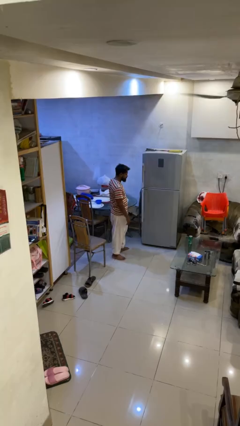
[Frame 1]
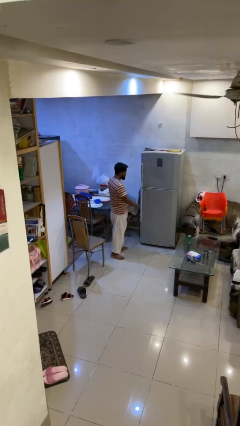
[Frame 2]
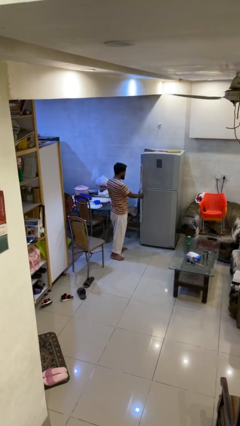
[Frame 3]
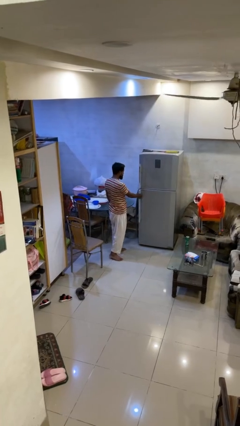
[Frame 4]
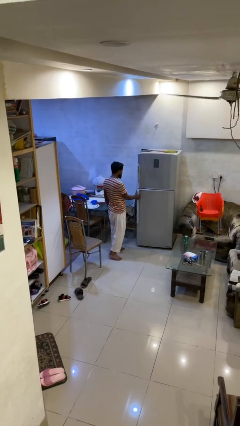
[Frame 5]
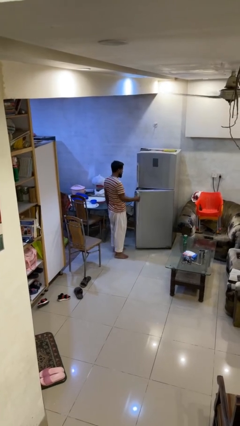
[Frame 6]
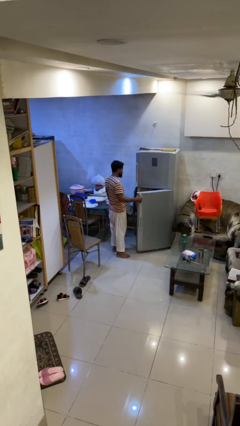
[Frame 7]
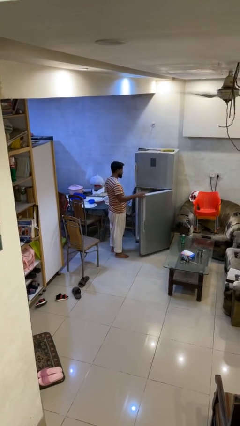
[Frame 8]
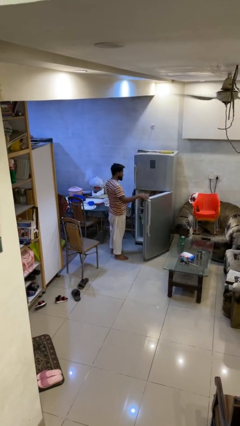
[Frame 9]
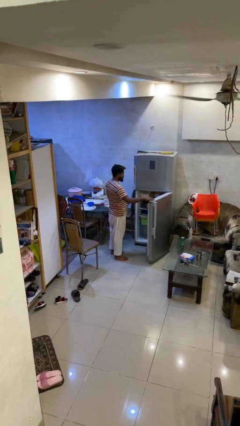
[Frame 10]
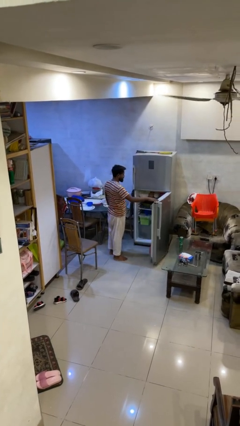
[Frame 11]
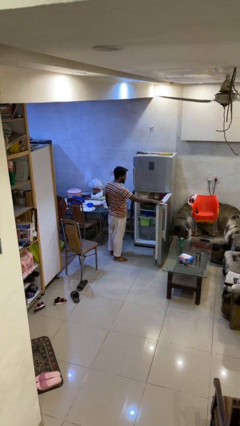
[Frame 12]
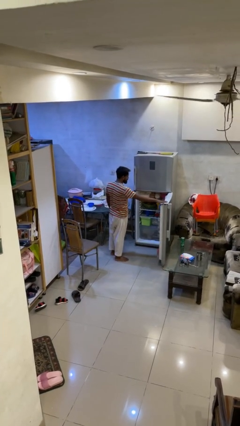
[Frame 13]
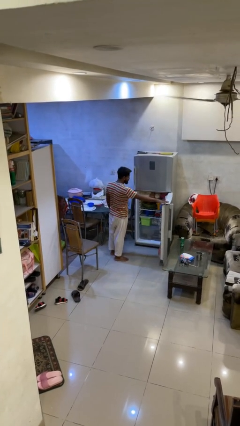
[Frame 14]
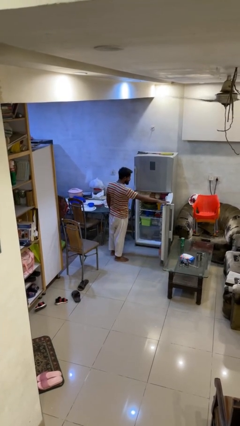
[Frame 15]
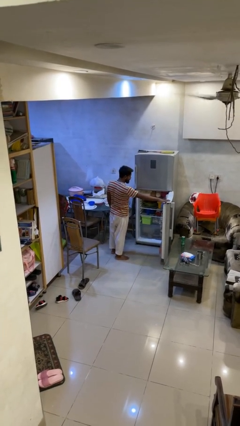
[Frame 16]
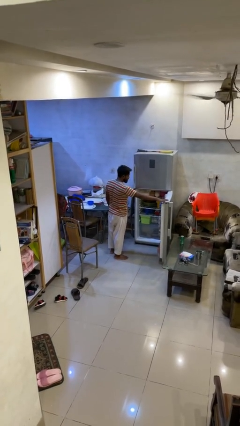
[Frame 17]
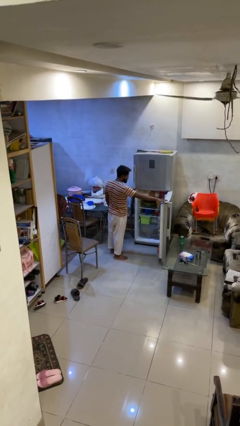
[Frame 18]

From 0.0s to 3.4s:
person opens refrigerator

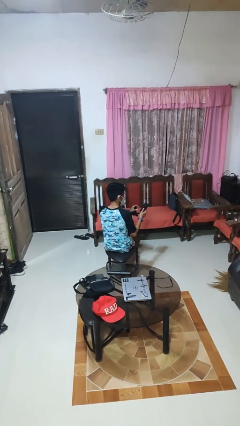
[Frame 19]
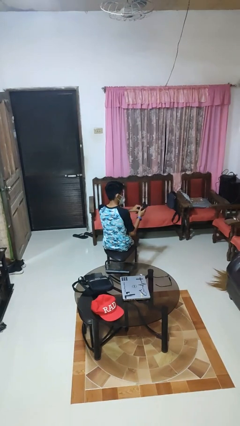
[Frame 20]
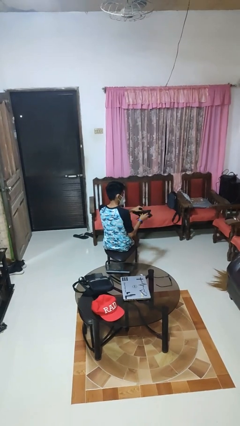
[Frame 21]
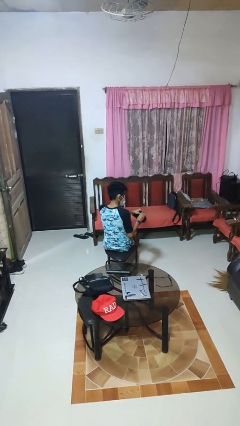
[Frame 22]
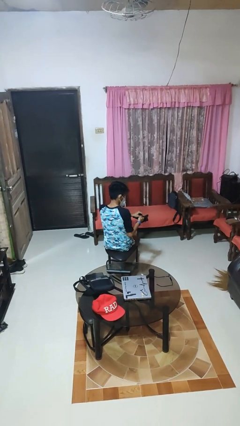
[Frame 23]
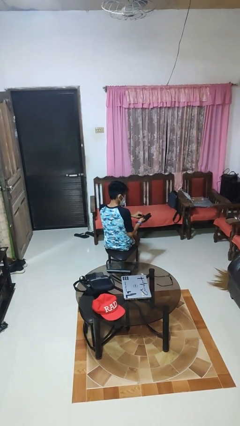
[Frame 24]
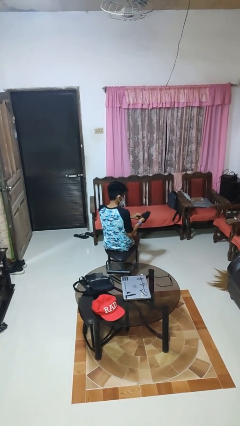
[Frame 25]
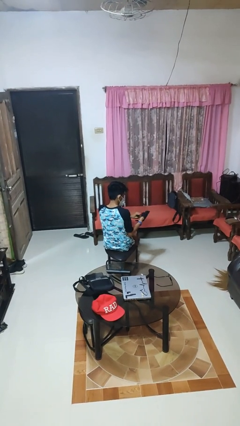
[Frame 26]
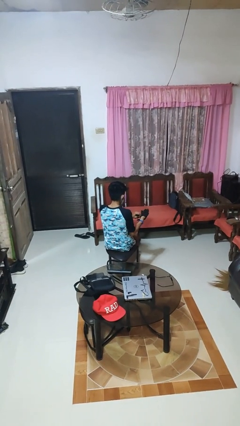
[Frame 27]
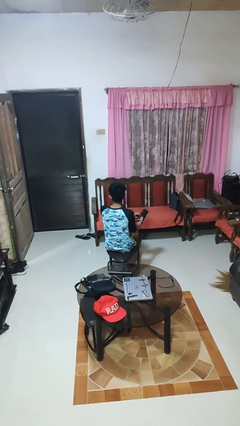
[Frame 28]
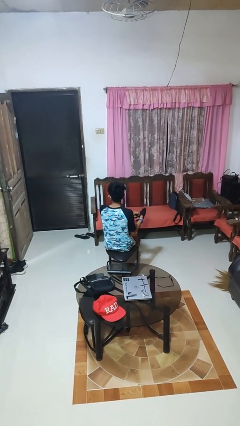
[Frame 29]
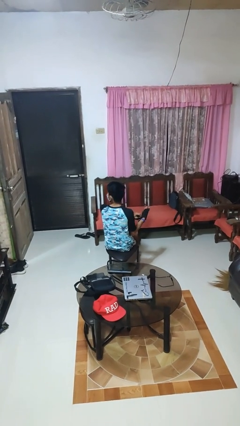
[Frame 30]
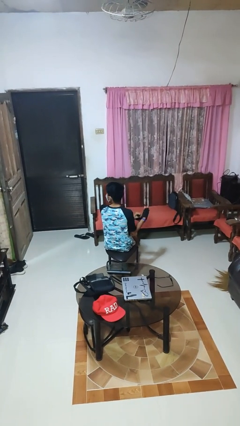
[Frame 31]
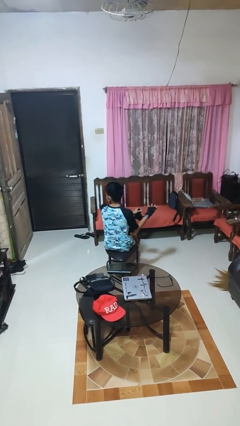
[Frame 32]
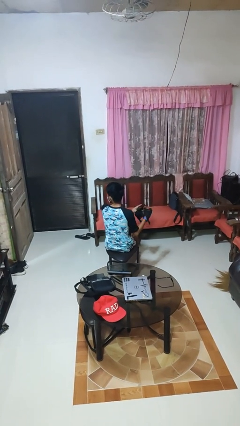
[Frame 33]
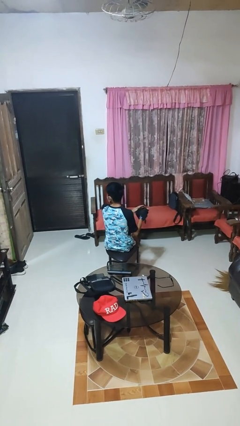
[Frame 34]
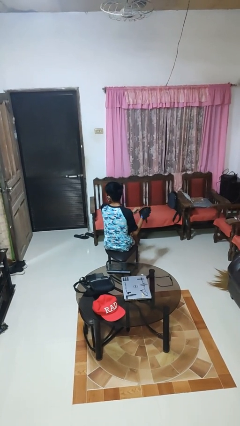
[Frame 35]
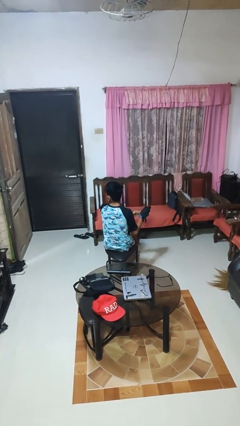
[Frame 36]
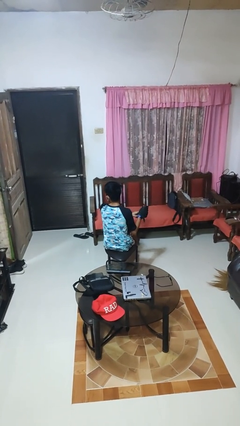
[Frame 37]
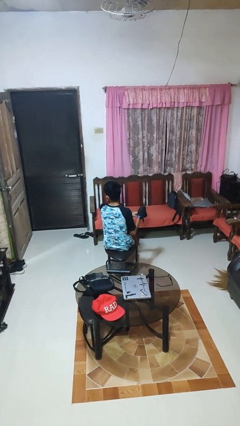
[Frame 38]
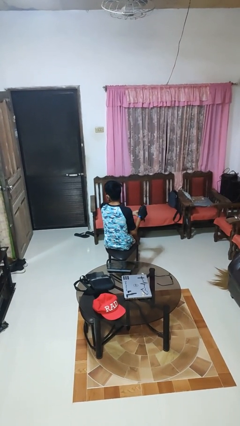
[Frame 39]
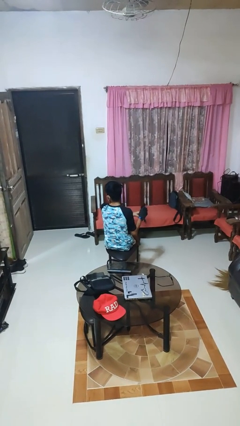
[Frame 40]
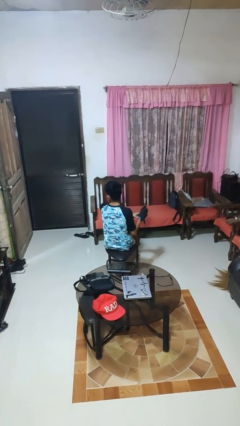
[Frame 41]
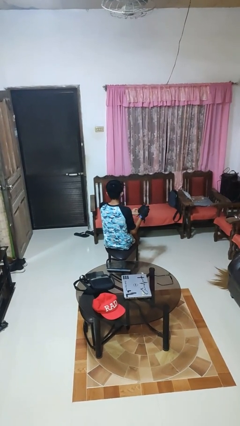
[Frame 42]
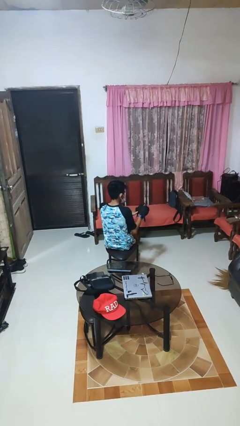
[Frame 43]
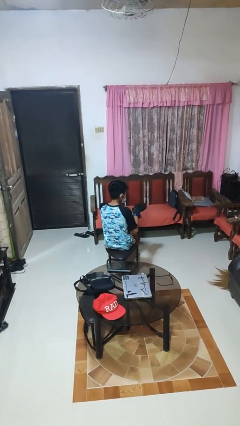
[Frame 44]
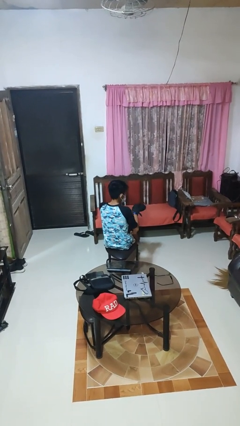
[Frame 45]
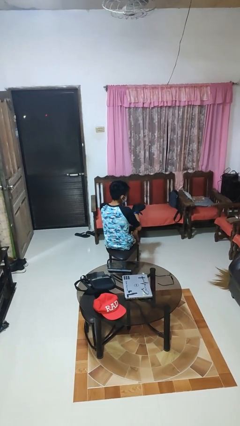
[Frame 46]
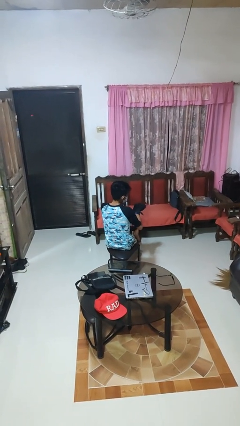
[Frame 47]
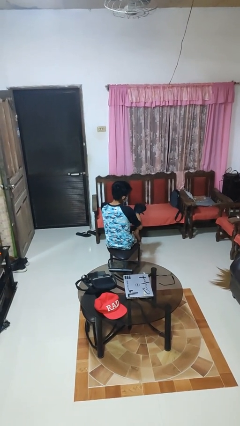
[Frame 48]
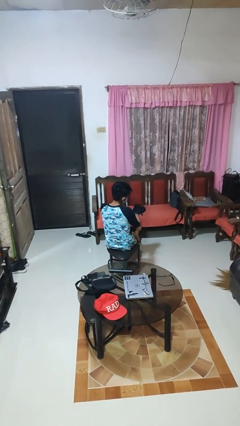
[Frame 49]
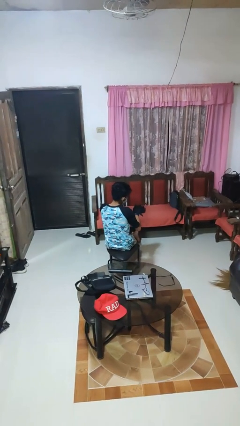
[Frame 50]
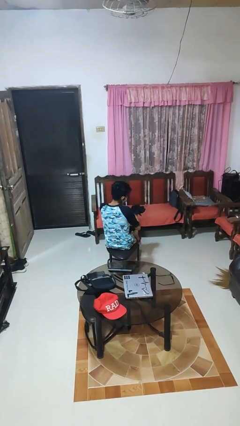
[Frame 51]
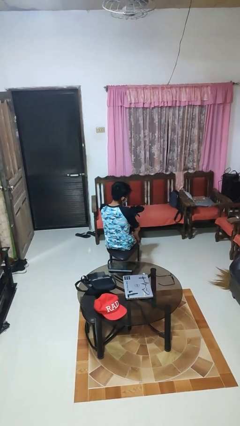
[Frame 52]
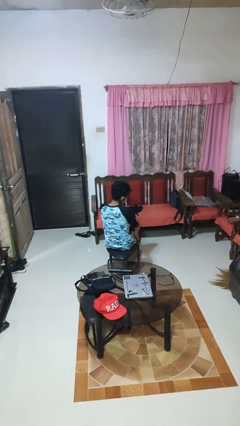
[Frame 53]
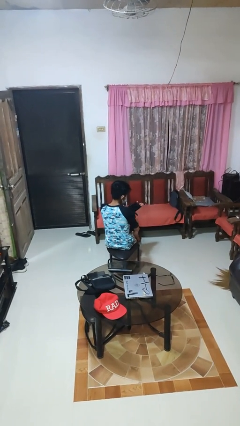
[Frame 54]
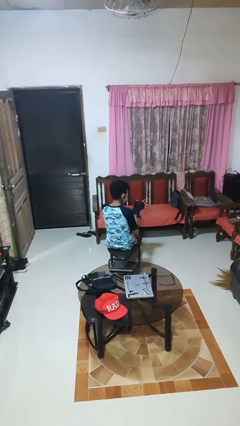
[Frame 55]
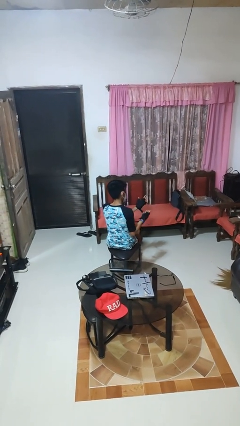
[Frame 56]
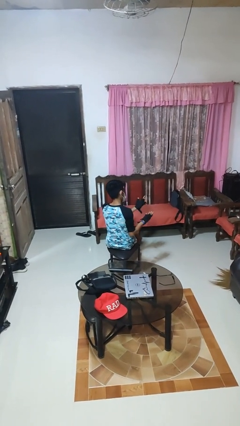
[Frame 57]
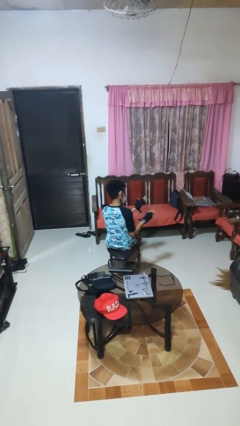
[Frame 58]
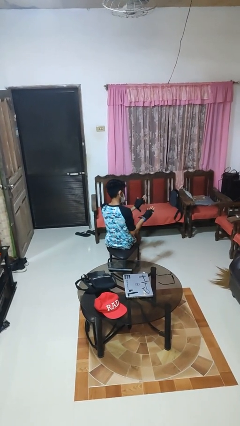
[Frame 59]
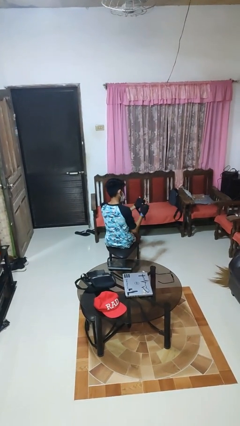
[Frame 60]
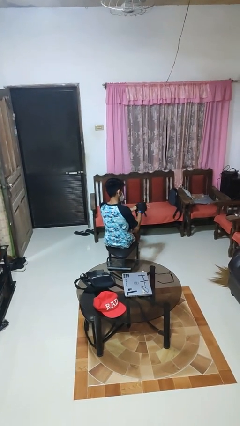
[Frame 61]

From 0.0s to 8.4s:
person puts on gloves

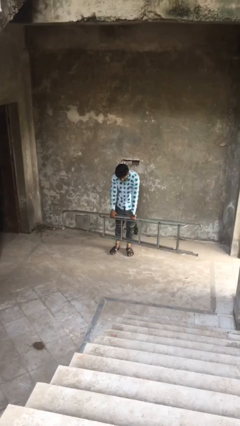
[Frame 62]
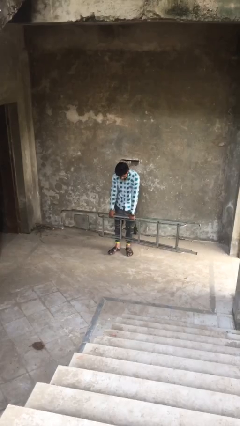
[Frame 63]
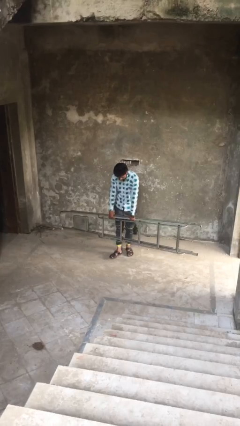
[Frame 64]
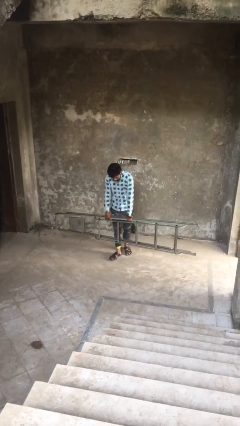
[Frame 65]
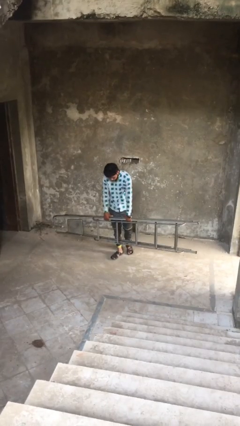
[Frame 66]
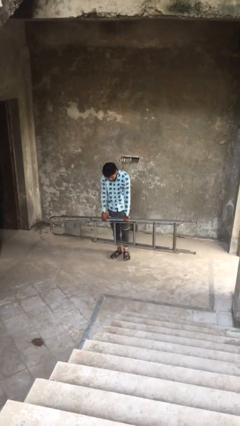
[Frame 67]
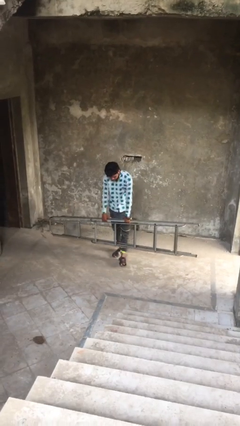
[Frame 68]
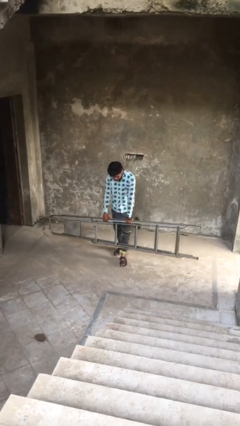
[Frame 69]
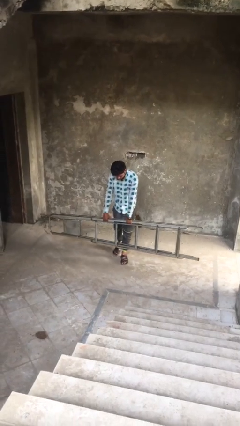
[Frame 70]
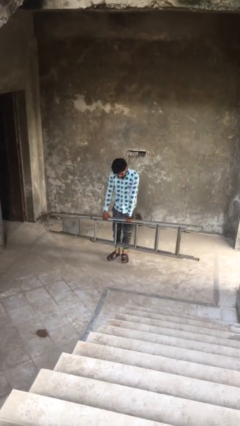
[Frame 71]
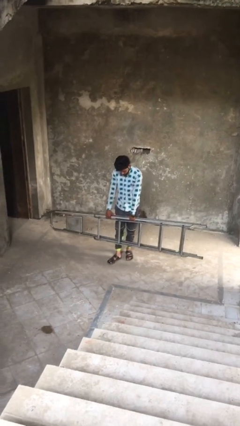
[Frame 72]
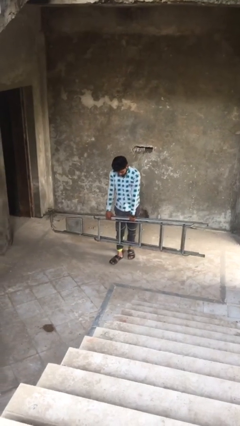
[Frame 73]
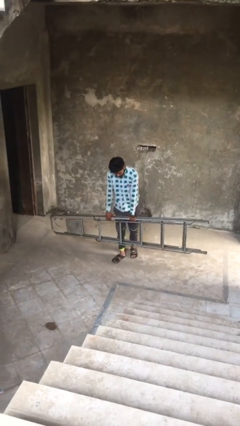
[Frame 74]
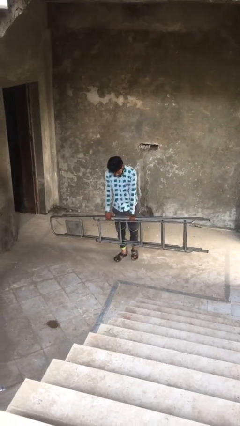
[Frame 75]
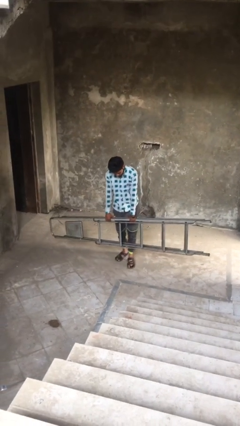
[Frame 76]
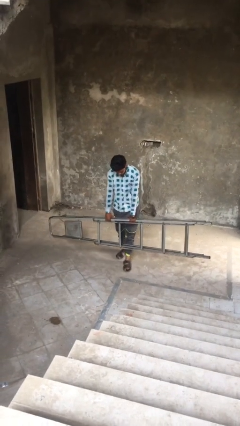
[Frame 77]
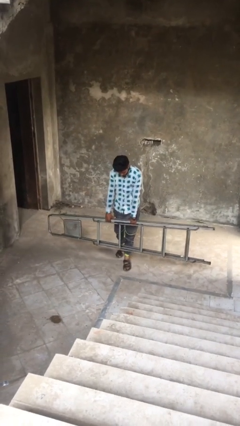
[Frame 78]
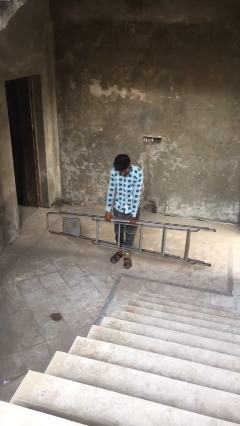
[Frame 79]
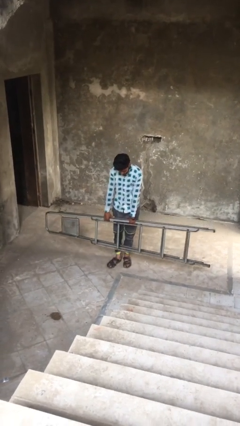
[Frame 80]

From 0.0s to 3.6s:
person carries heavy object

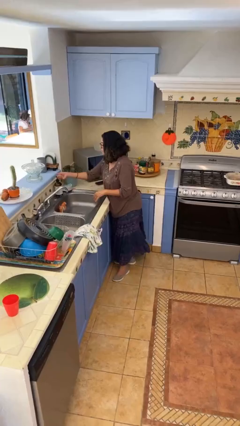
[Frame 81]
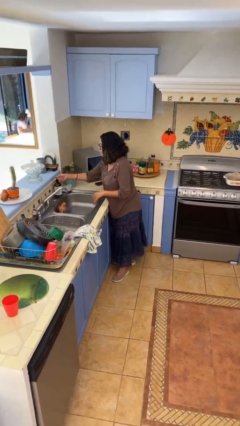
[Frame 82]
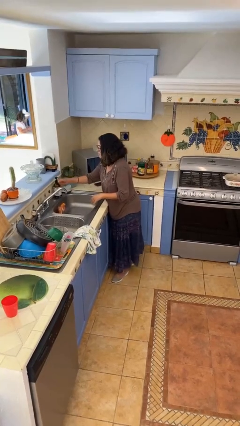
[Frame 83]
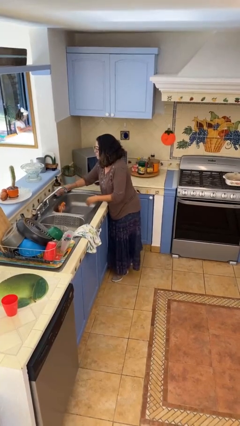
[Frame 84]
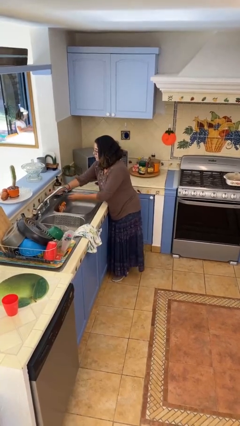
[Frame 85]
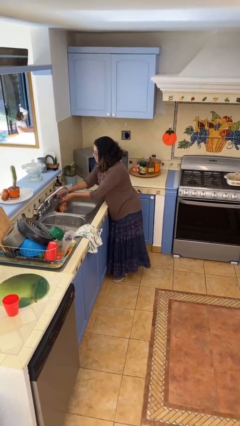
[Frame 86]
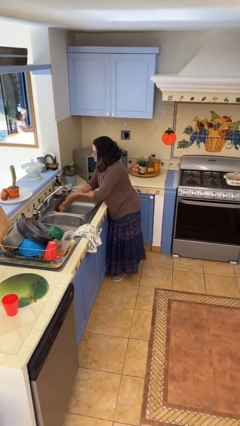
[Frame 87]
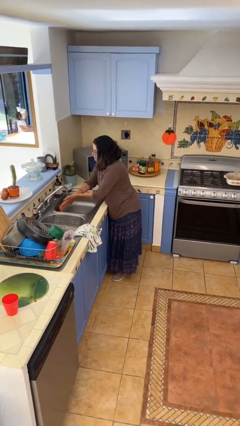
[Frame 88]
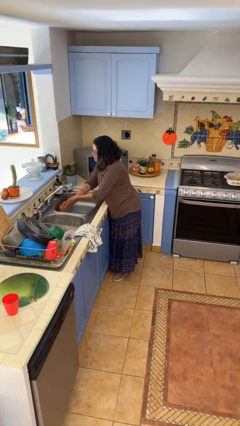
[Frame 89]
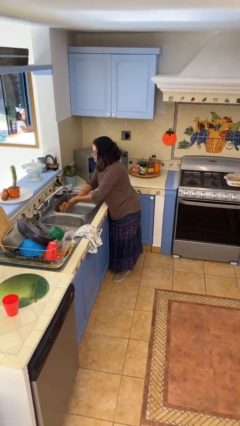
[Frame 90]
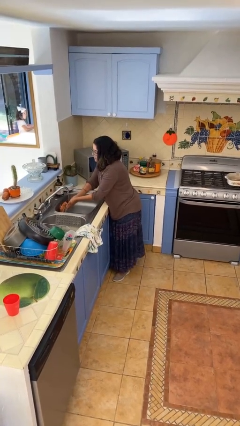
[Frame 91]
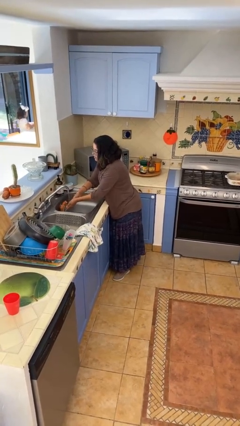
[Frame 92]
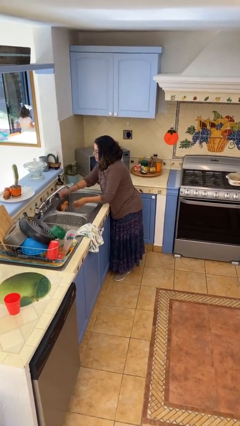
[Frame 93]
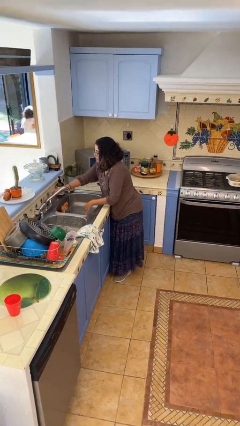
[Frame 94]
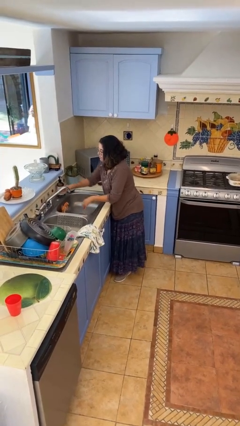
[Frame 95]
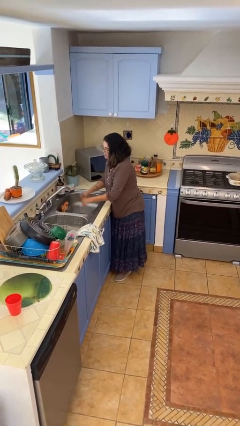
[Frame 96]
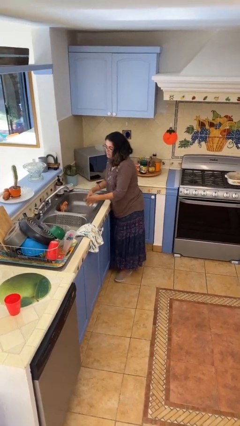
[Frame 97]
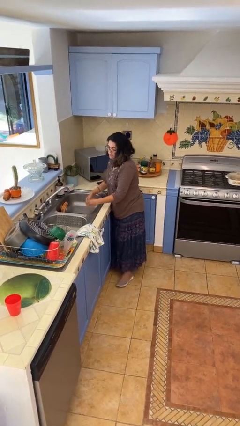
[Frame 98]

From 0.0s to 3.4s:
person washes hands
